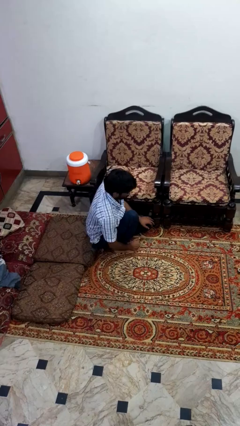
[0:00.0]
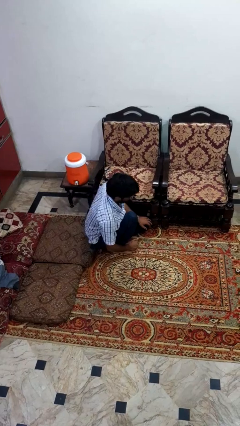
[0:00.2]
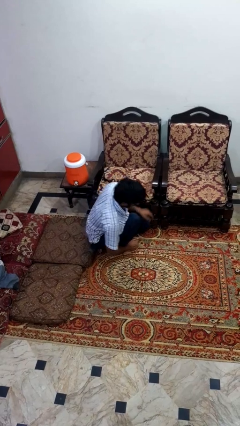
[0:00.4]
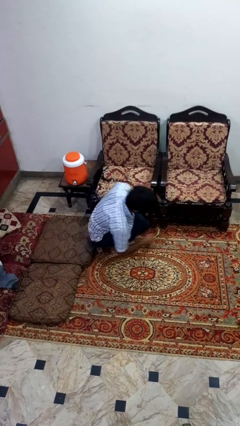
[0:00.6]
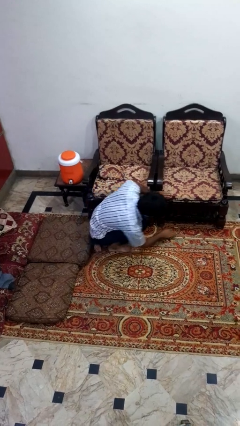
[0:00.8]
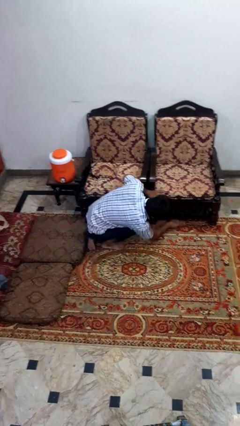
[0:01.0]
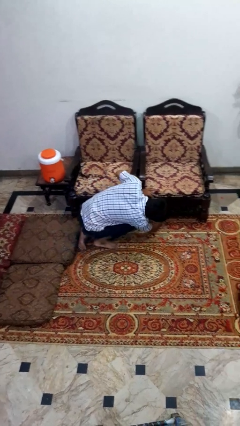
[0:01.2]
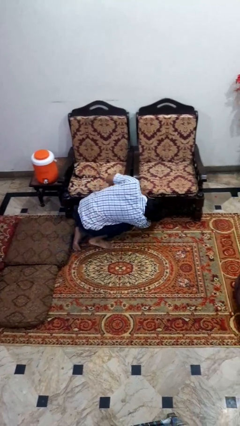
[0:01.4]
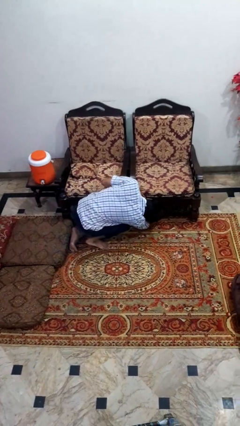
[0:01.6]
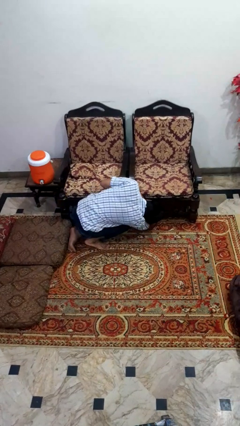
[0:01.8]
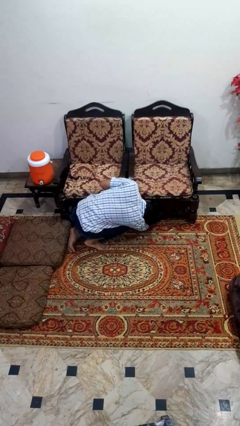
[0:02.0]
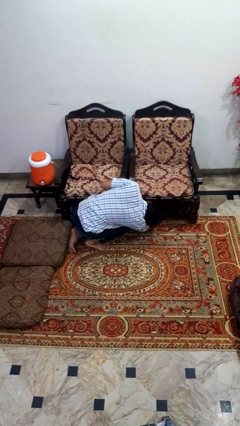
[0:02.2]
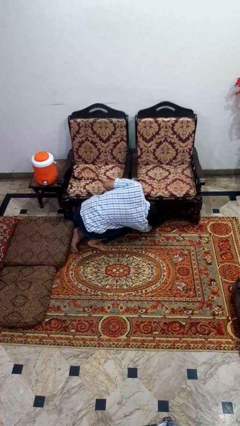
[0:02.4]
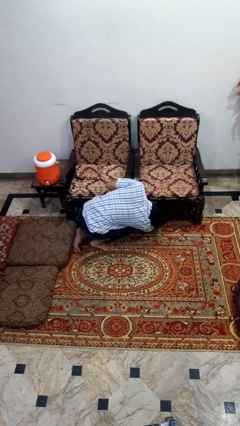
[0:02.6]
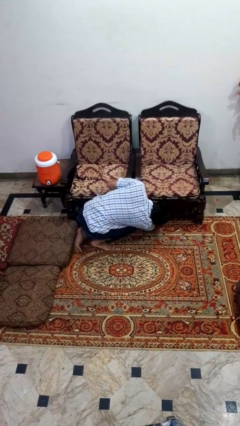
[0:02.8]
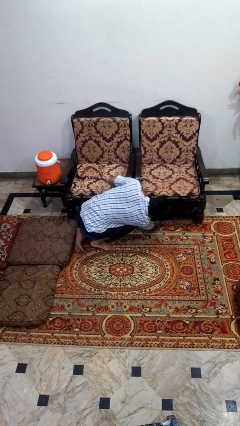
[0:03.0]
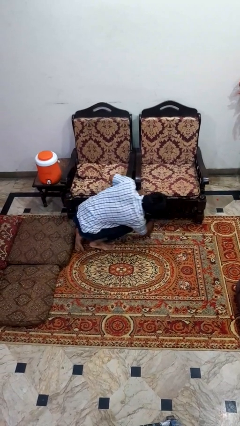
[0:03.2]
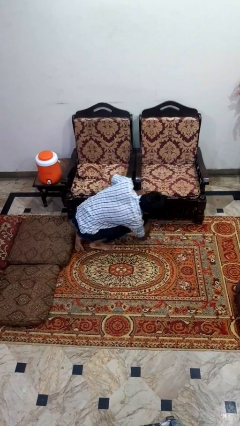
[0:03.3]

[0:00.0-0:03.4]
person searches under couch

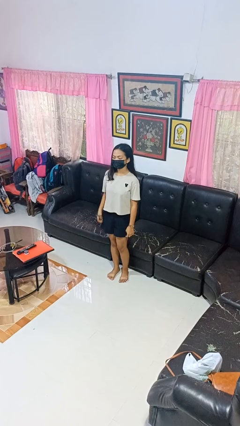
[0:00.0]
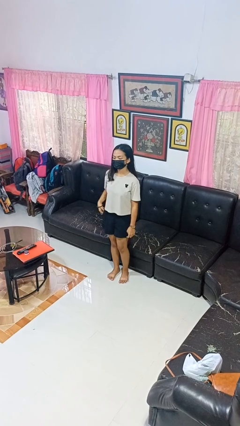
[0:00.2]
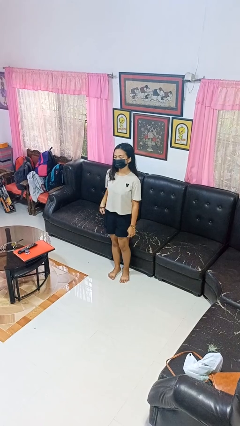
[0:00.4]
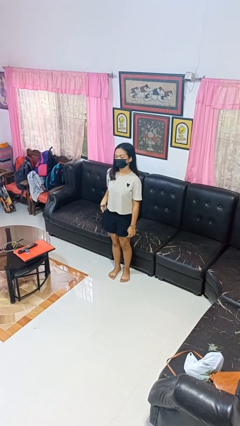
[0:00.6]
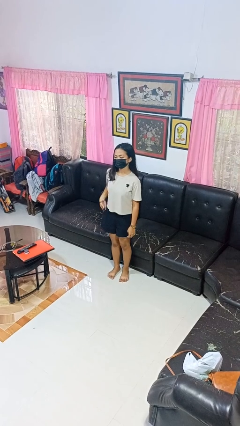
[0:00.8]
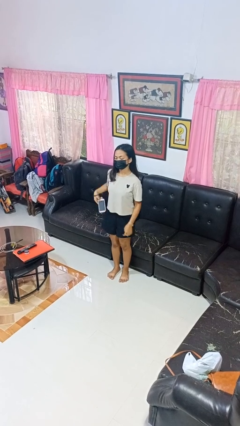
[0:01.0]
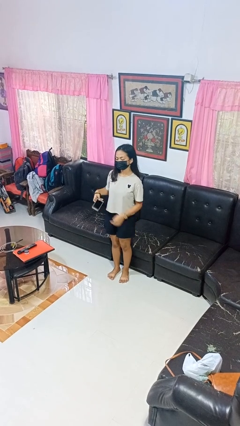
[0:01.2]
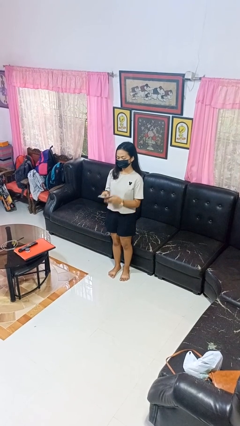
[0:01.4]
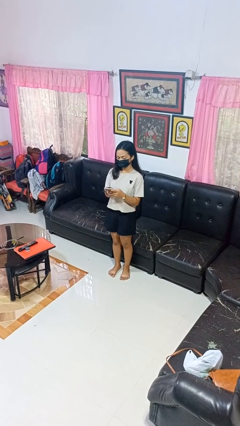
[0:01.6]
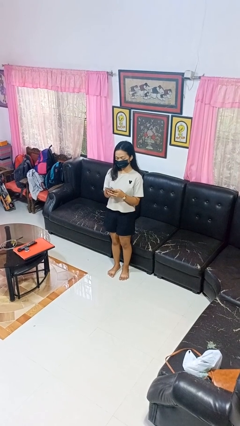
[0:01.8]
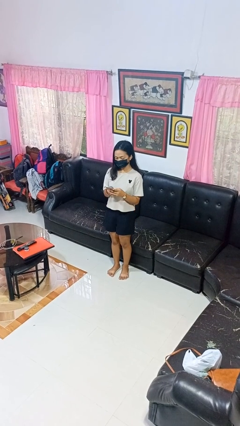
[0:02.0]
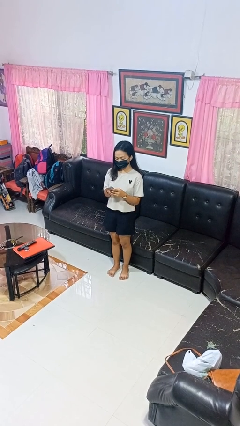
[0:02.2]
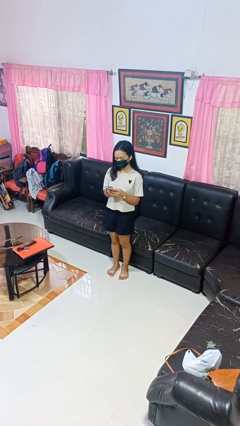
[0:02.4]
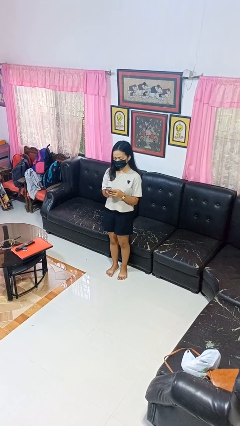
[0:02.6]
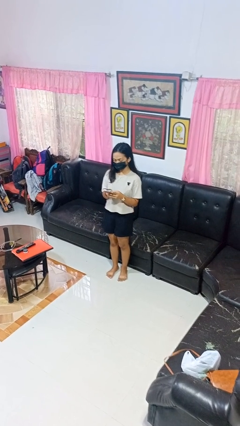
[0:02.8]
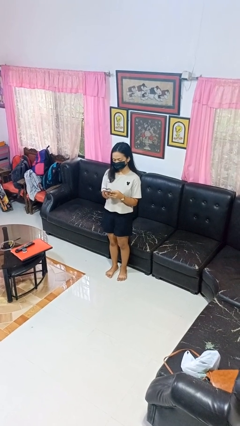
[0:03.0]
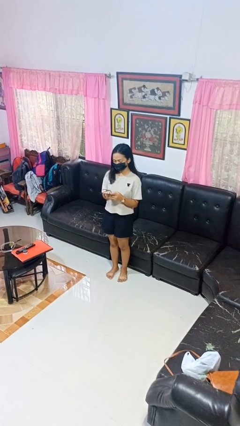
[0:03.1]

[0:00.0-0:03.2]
person takes phone from pocket

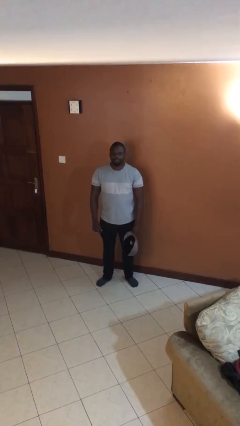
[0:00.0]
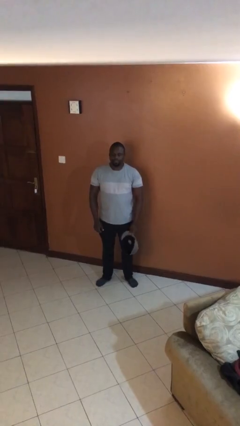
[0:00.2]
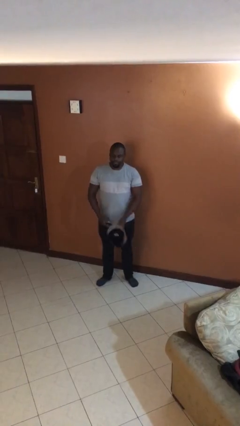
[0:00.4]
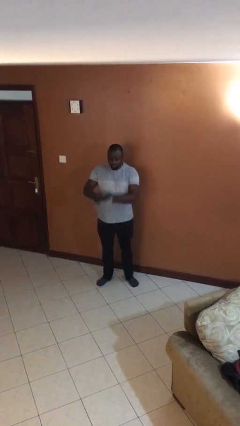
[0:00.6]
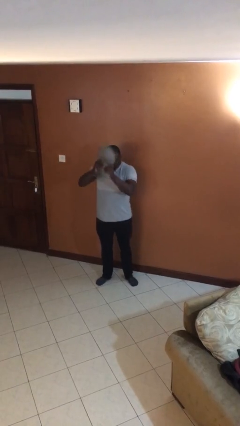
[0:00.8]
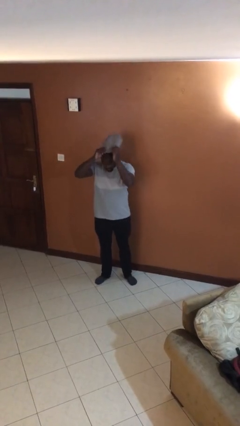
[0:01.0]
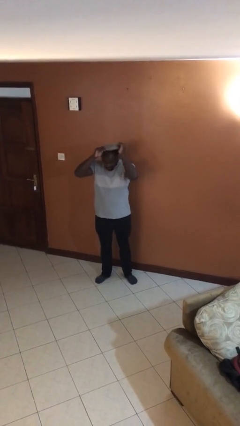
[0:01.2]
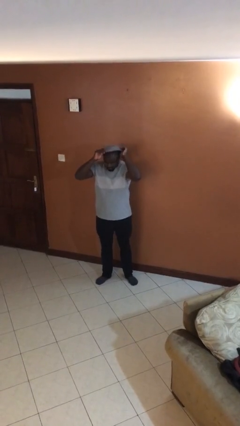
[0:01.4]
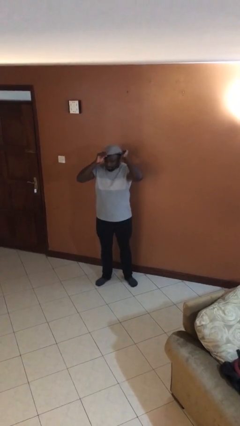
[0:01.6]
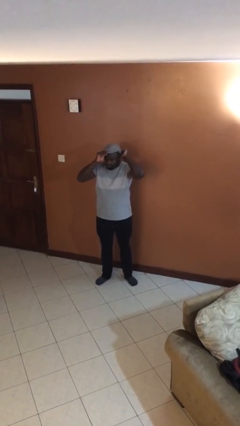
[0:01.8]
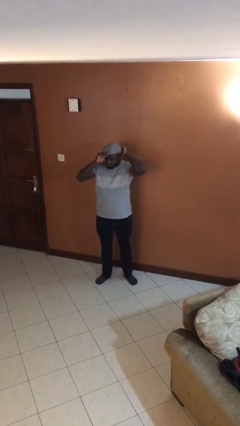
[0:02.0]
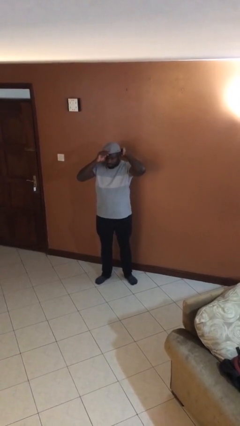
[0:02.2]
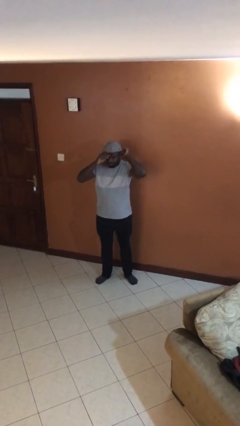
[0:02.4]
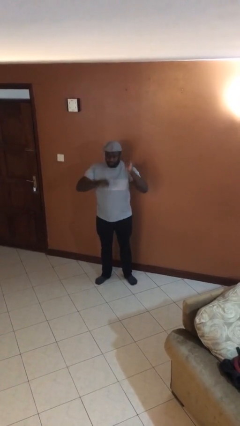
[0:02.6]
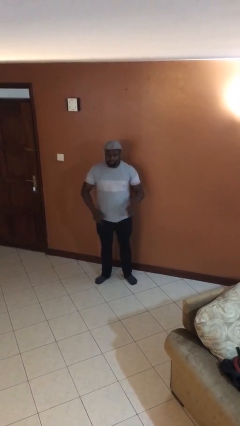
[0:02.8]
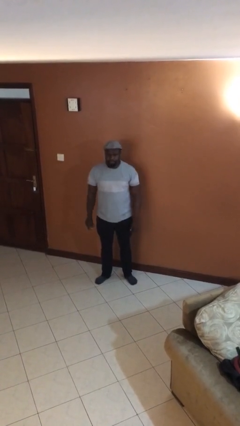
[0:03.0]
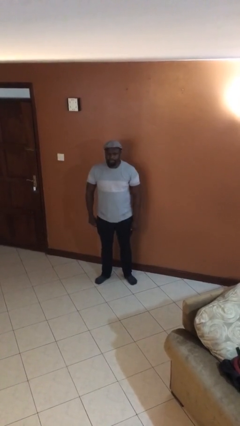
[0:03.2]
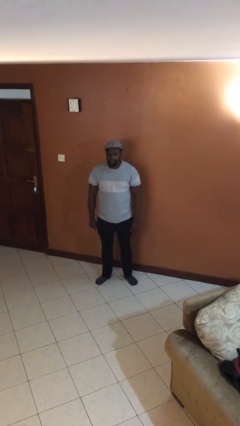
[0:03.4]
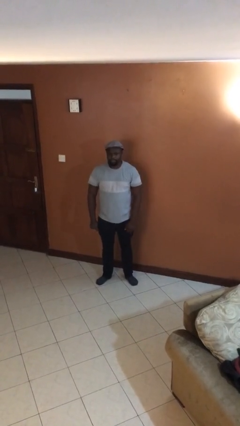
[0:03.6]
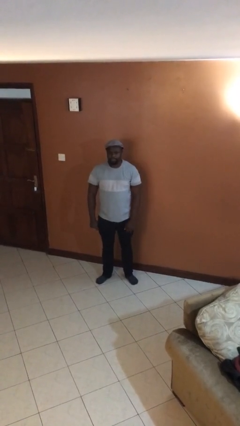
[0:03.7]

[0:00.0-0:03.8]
person puts on hat

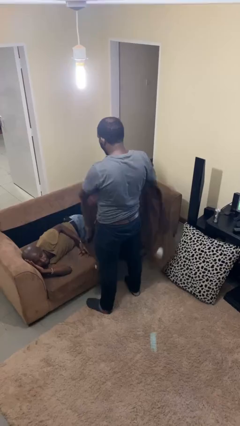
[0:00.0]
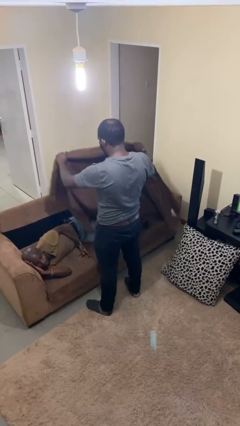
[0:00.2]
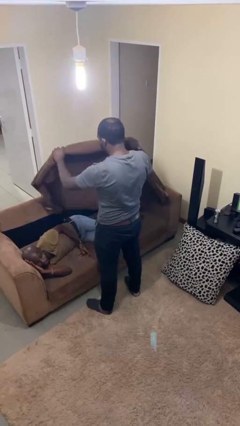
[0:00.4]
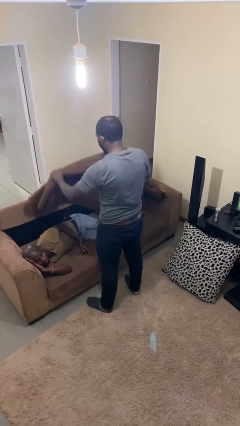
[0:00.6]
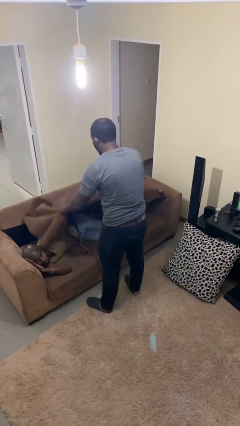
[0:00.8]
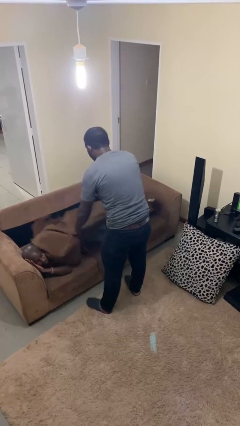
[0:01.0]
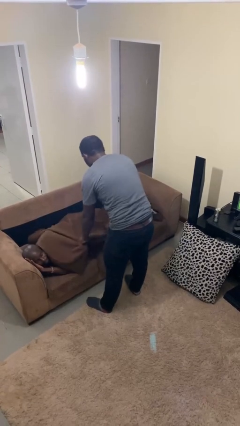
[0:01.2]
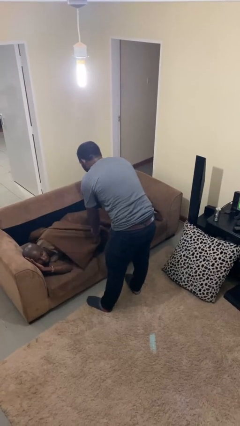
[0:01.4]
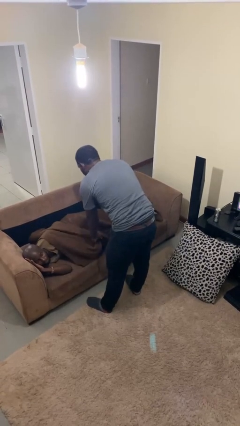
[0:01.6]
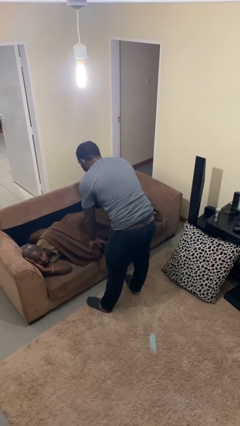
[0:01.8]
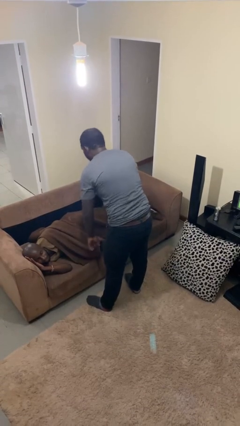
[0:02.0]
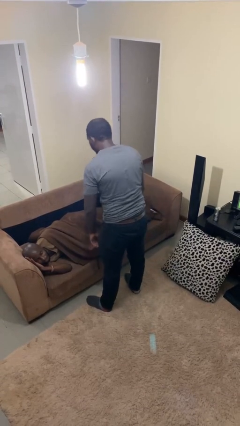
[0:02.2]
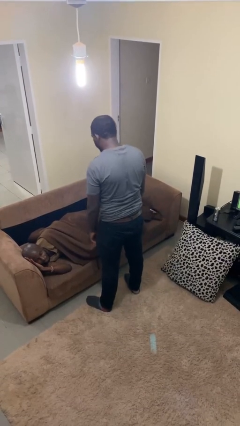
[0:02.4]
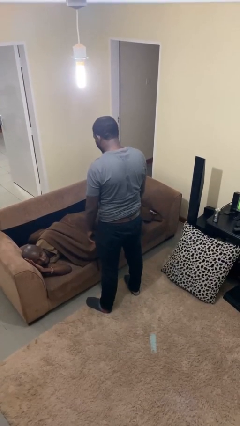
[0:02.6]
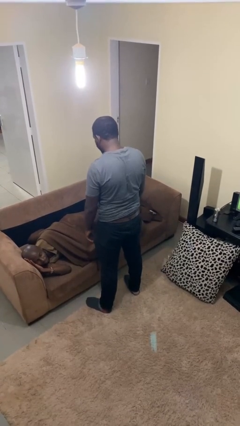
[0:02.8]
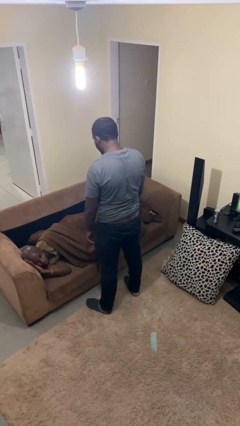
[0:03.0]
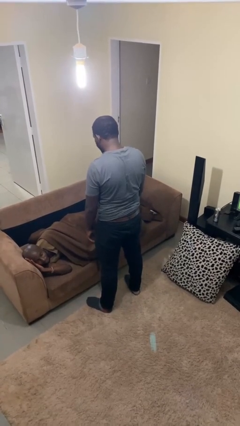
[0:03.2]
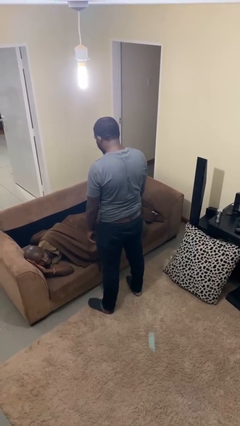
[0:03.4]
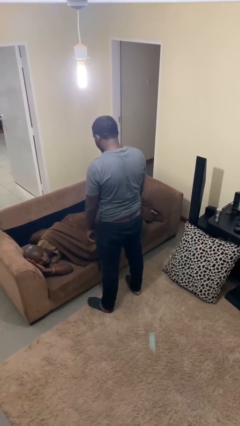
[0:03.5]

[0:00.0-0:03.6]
person covers friend with blanket

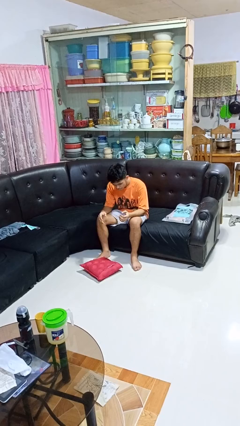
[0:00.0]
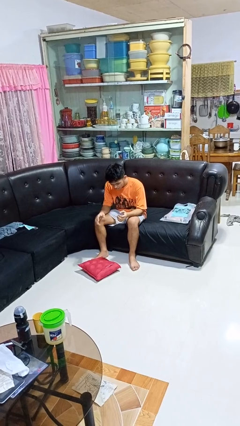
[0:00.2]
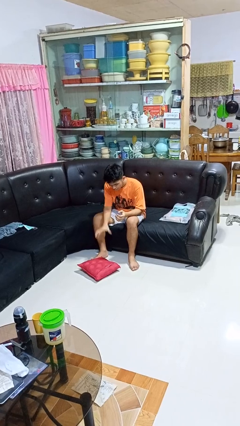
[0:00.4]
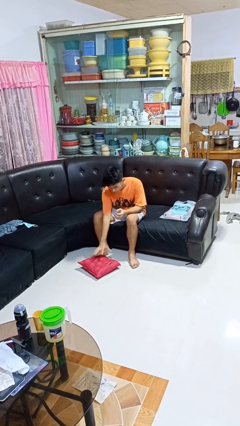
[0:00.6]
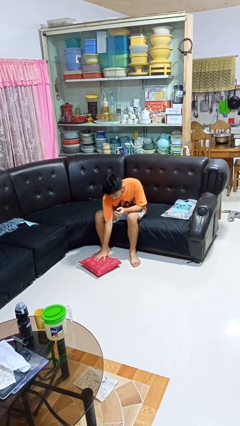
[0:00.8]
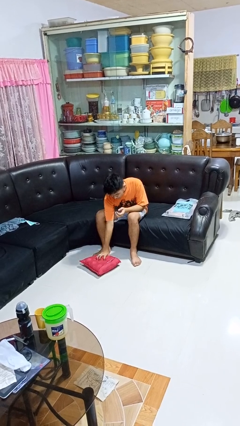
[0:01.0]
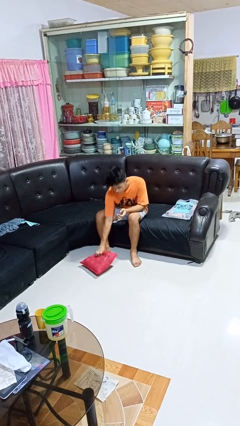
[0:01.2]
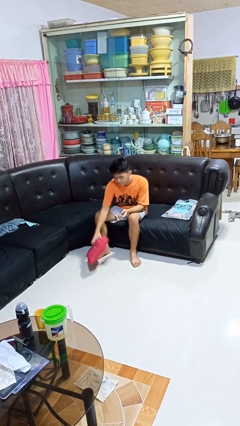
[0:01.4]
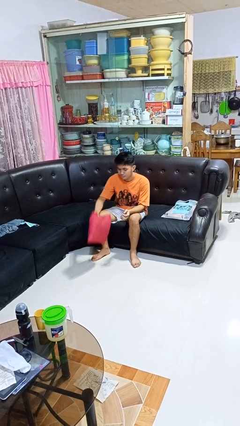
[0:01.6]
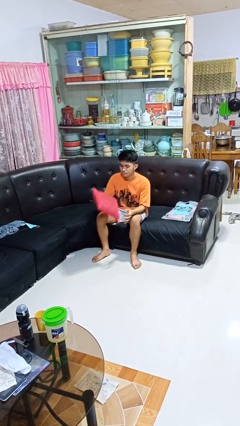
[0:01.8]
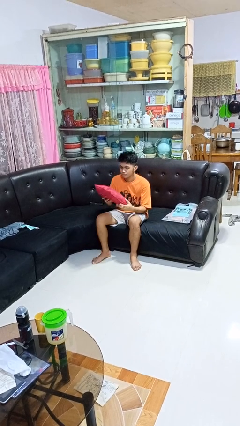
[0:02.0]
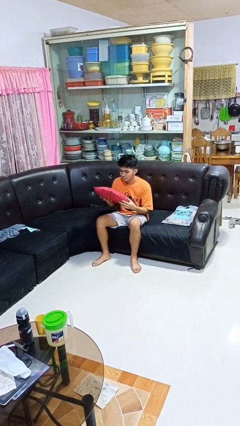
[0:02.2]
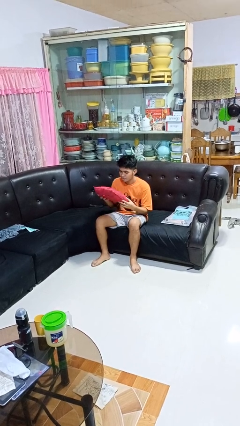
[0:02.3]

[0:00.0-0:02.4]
person picks up object from floor

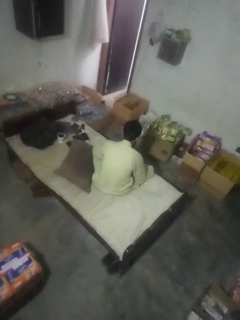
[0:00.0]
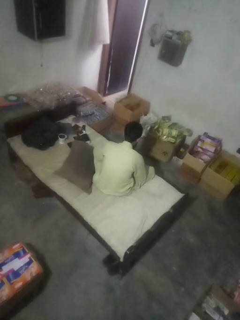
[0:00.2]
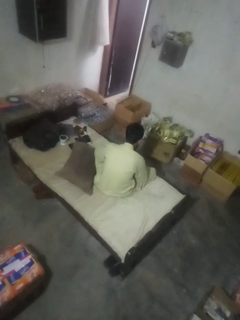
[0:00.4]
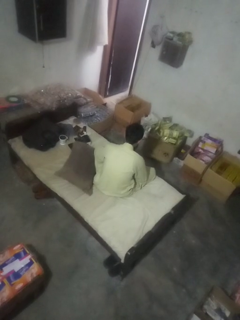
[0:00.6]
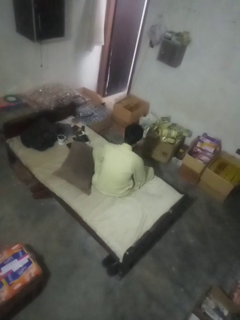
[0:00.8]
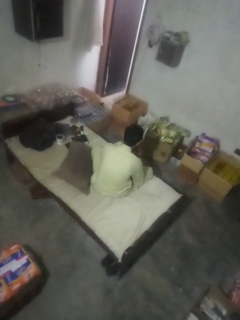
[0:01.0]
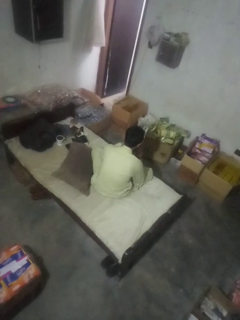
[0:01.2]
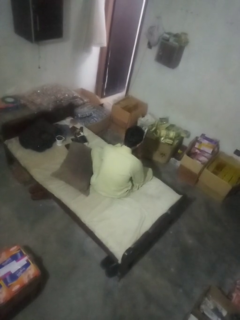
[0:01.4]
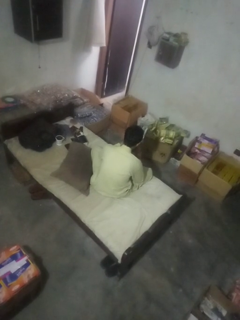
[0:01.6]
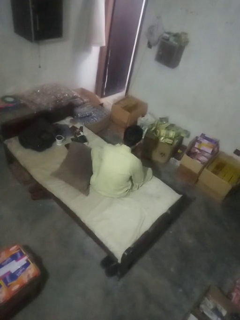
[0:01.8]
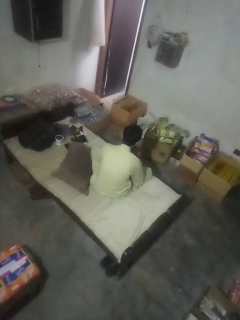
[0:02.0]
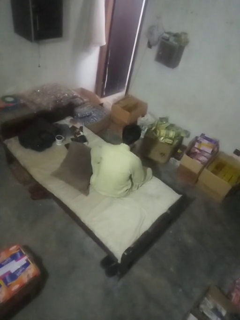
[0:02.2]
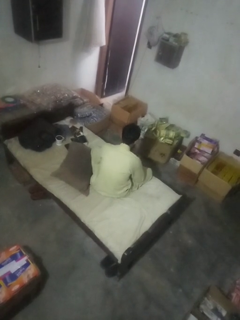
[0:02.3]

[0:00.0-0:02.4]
person paints fingernails
